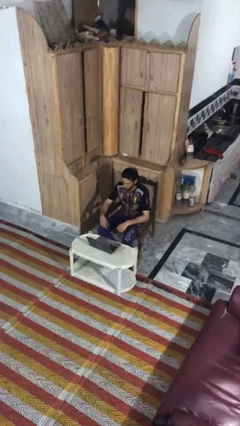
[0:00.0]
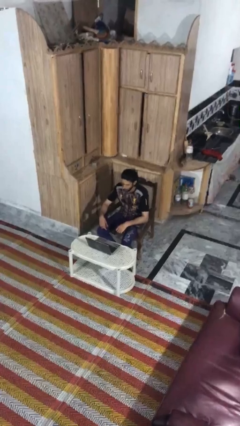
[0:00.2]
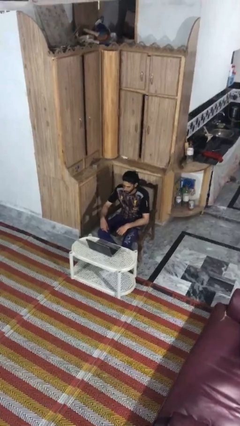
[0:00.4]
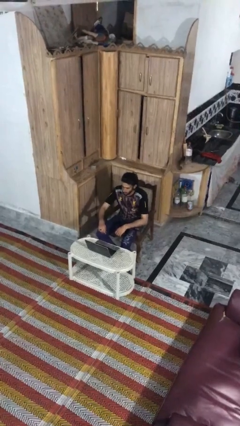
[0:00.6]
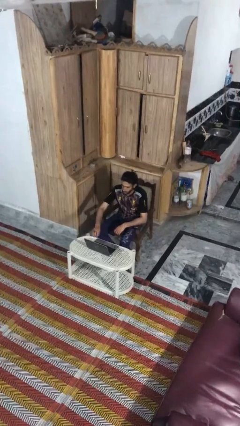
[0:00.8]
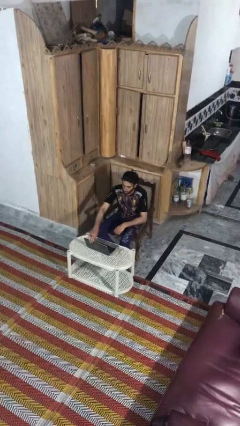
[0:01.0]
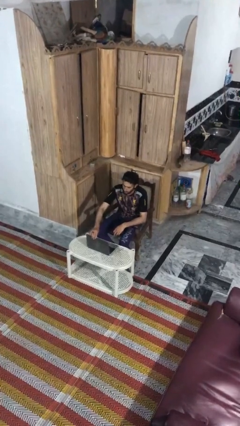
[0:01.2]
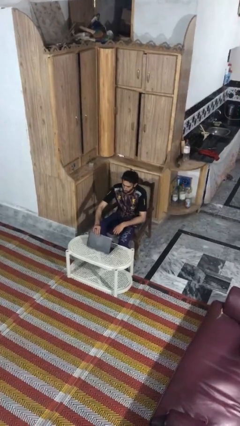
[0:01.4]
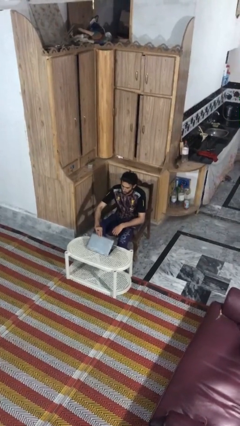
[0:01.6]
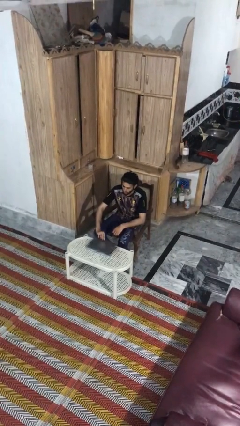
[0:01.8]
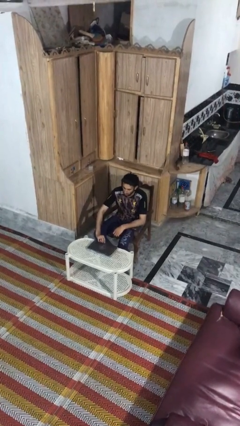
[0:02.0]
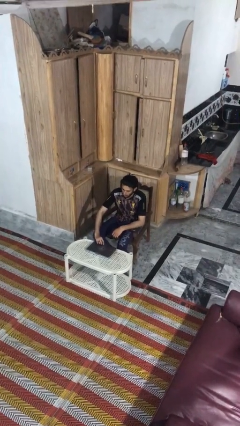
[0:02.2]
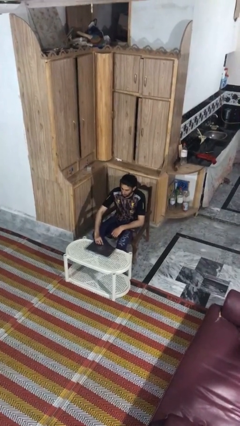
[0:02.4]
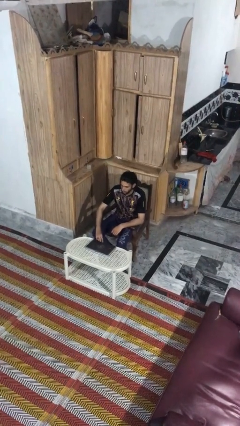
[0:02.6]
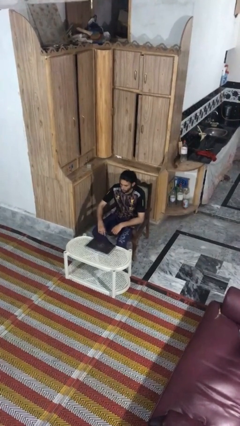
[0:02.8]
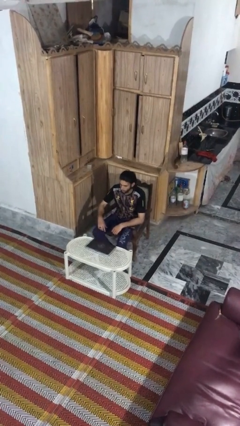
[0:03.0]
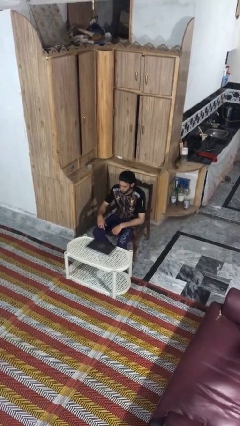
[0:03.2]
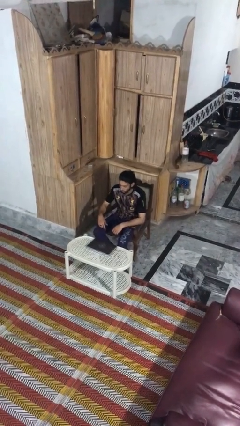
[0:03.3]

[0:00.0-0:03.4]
person closes laptop

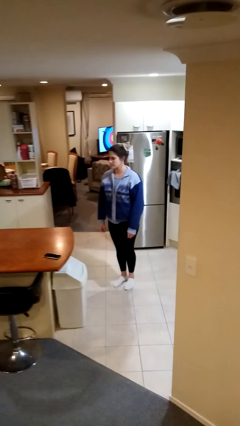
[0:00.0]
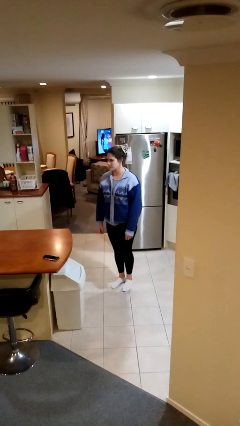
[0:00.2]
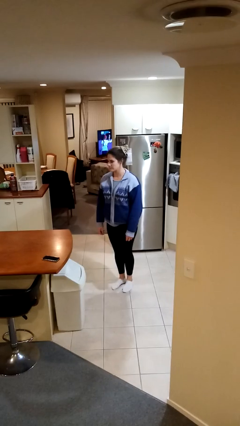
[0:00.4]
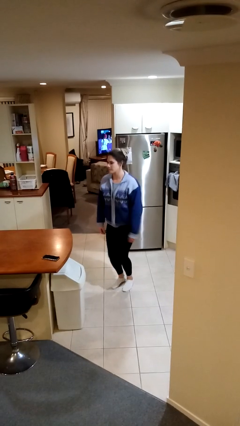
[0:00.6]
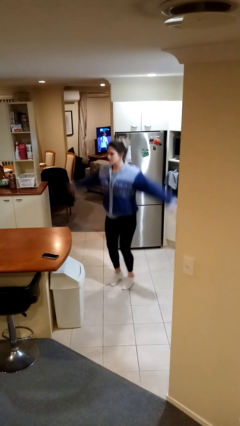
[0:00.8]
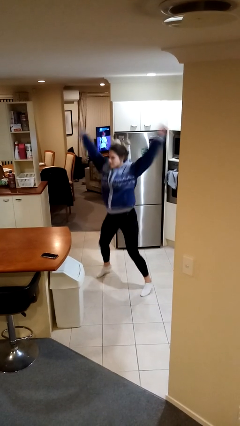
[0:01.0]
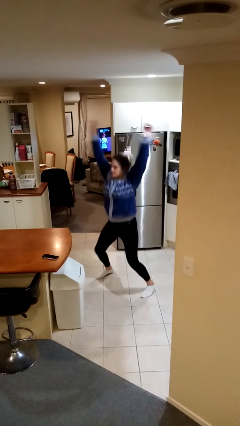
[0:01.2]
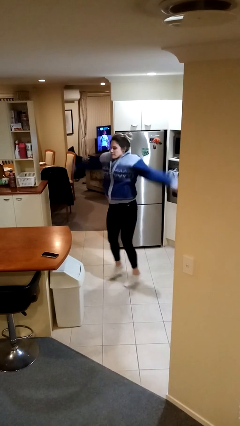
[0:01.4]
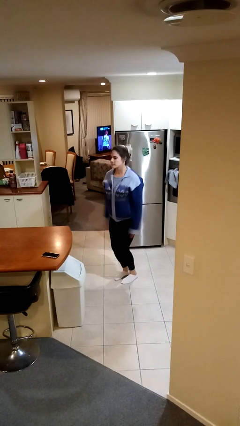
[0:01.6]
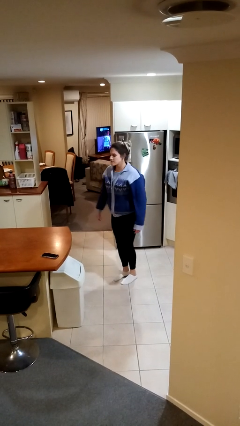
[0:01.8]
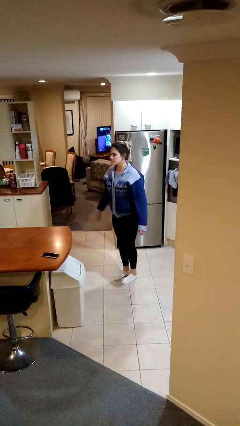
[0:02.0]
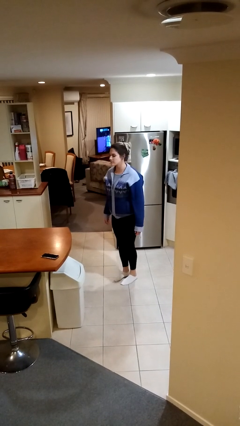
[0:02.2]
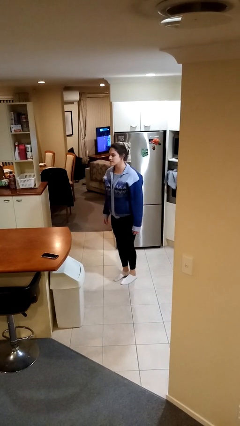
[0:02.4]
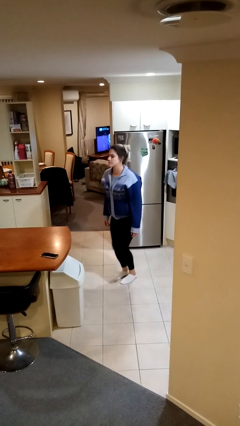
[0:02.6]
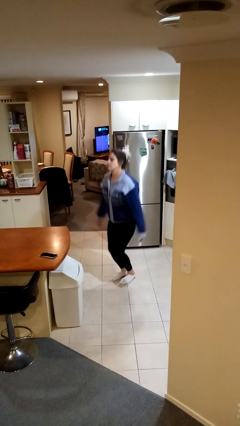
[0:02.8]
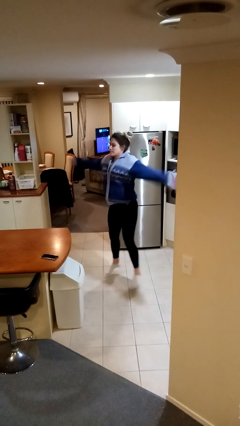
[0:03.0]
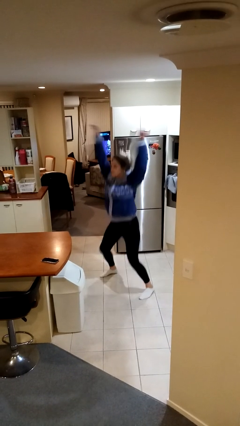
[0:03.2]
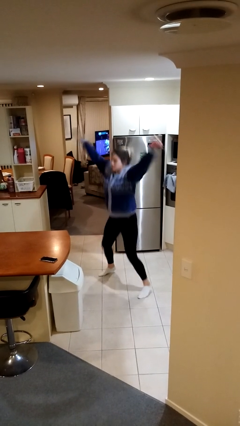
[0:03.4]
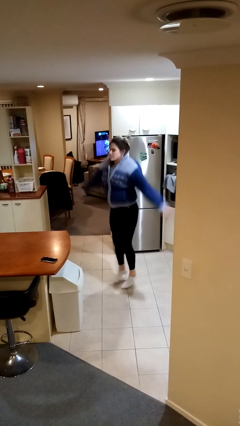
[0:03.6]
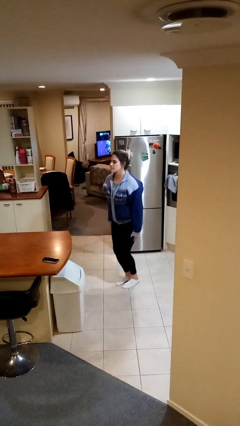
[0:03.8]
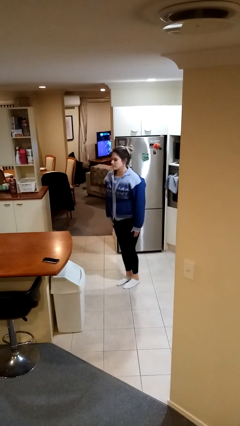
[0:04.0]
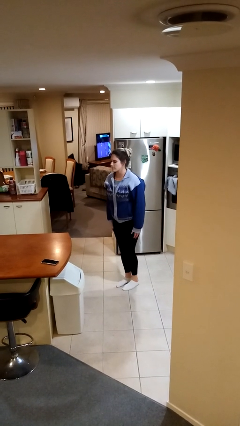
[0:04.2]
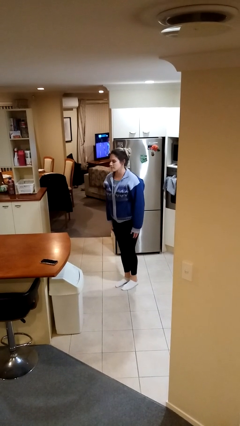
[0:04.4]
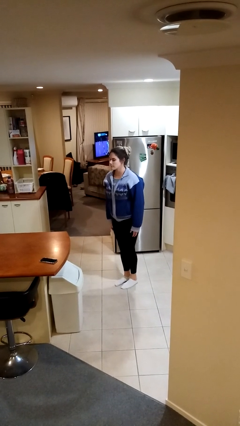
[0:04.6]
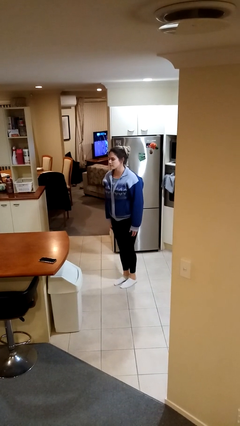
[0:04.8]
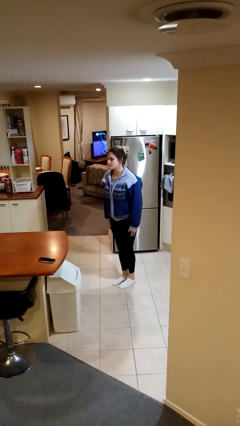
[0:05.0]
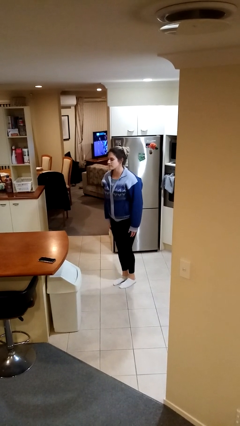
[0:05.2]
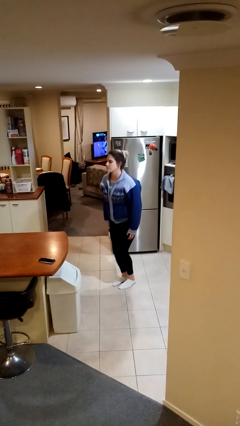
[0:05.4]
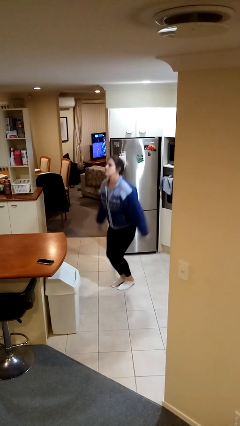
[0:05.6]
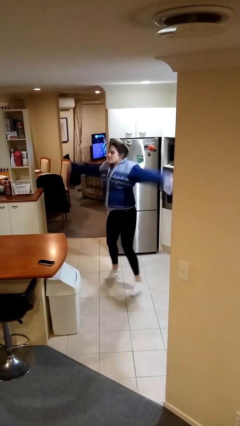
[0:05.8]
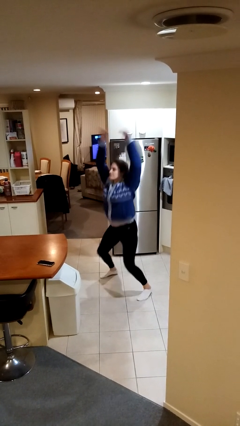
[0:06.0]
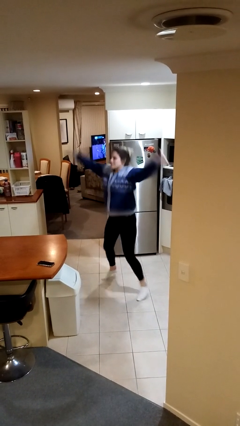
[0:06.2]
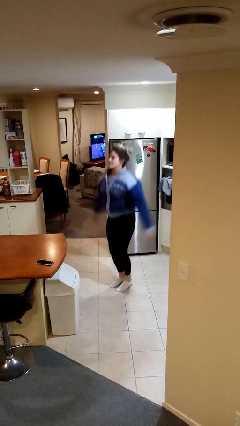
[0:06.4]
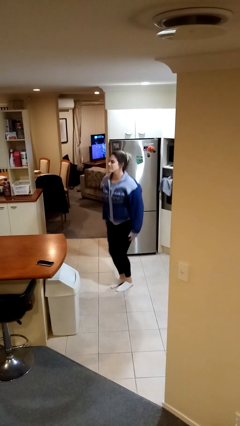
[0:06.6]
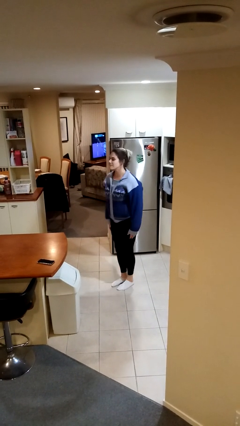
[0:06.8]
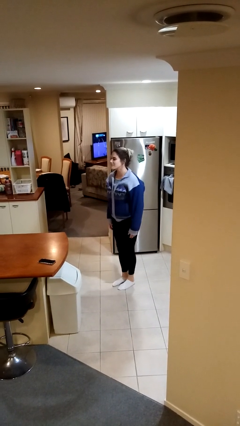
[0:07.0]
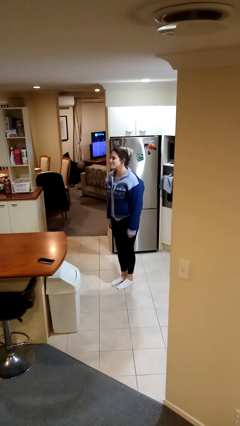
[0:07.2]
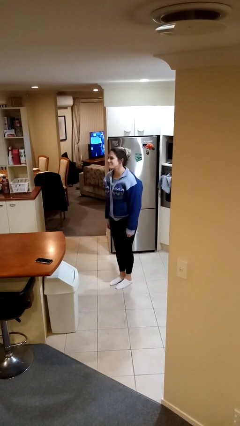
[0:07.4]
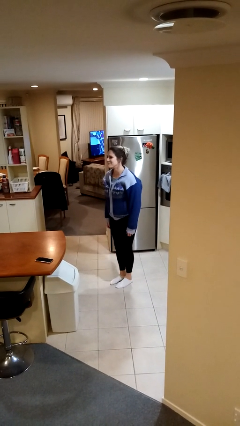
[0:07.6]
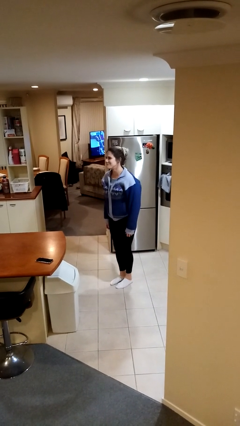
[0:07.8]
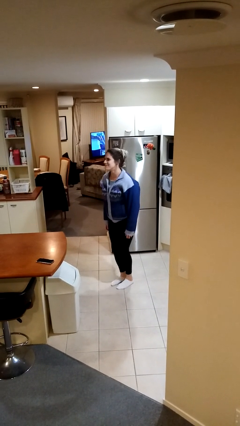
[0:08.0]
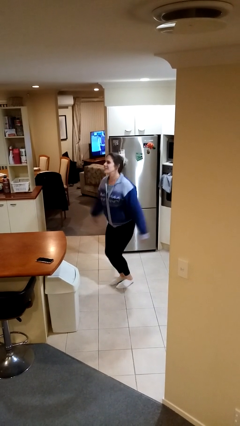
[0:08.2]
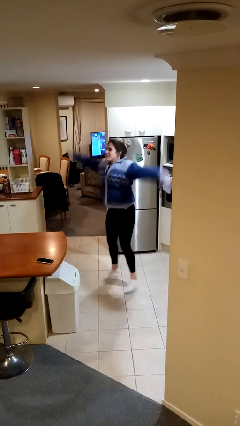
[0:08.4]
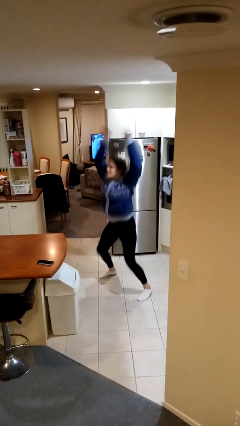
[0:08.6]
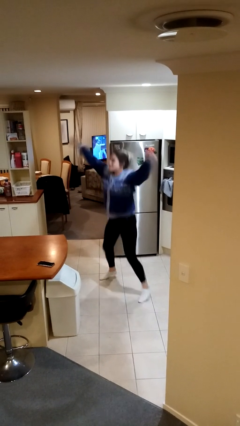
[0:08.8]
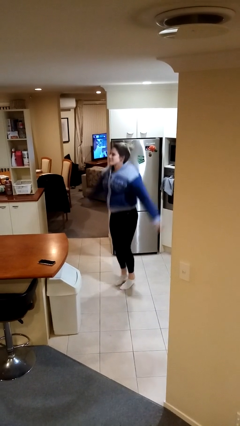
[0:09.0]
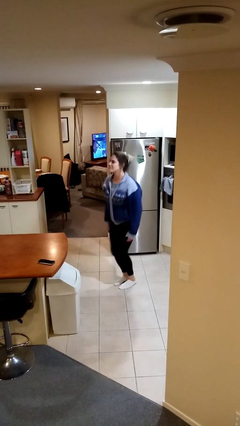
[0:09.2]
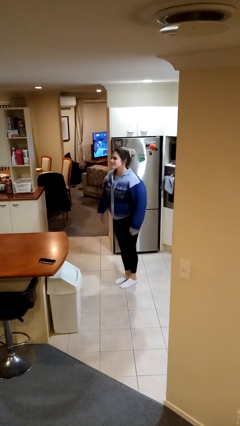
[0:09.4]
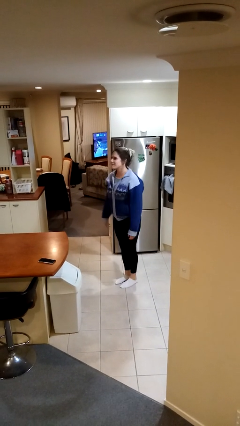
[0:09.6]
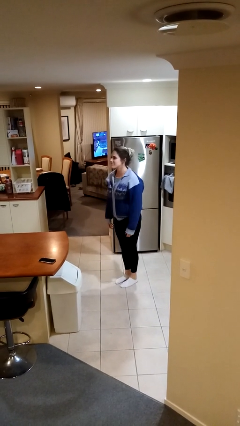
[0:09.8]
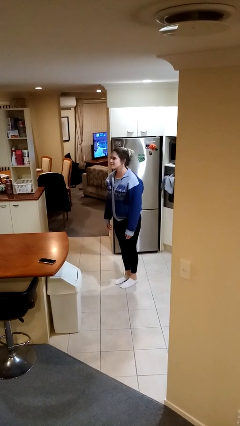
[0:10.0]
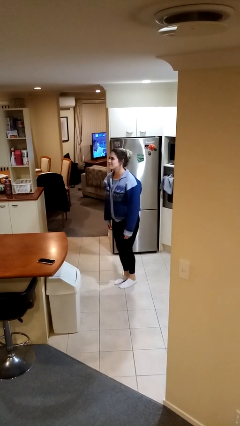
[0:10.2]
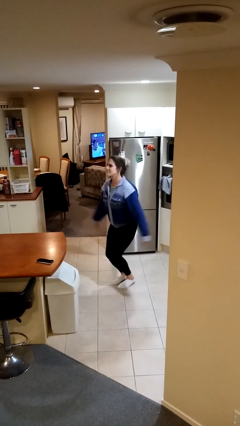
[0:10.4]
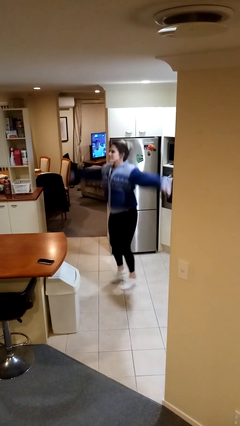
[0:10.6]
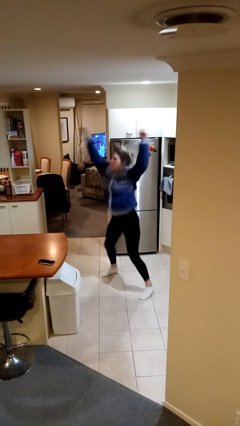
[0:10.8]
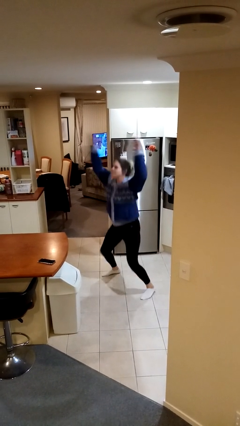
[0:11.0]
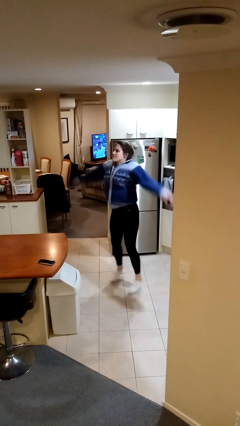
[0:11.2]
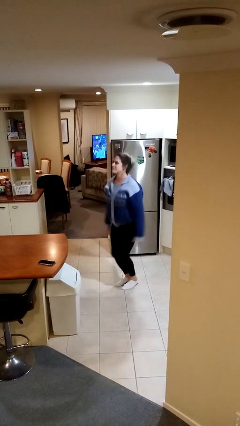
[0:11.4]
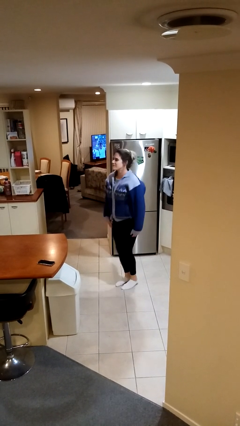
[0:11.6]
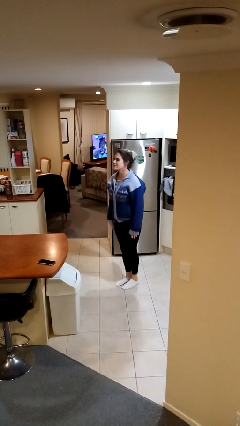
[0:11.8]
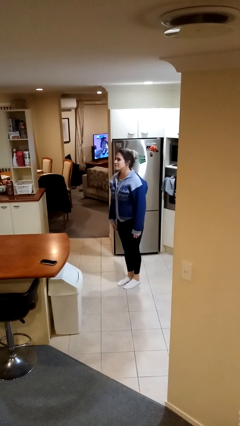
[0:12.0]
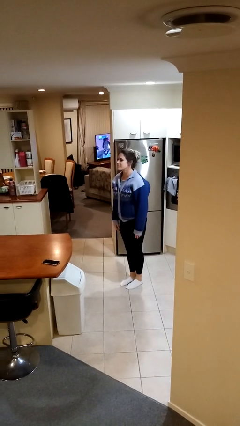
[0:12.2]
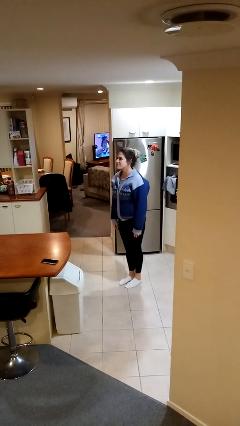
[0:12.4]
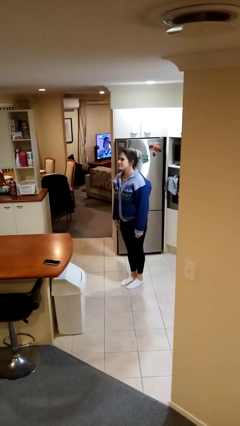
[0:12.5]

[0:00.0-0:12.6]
person exercises with jumping jacks

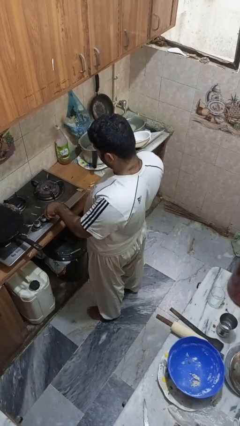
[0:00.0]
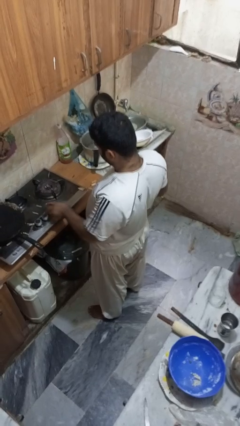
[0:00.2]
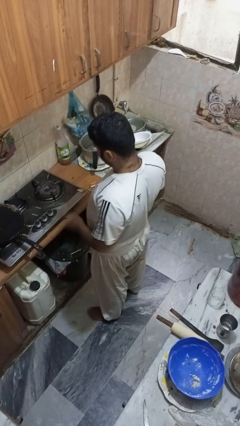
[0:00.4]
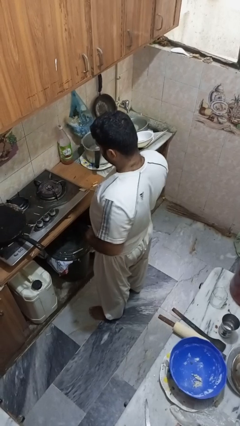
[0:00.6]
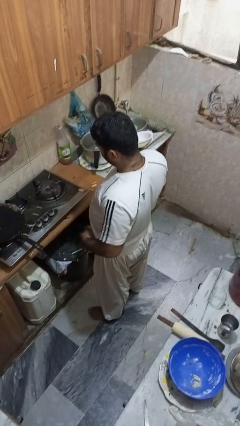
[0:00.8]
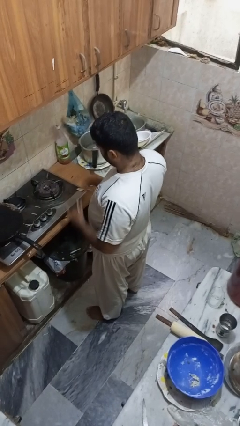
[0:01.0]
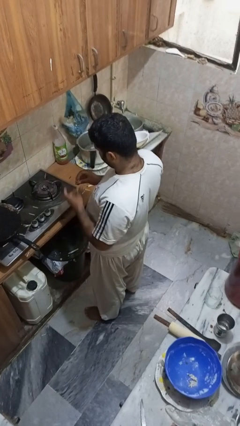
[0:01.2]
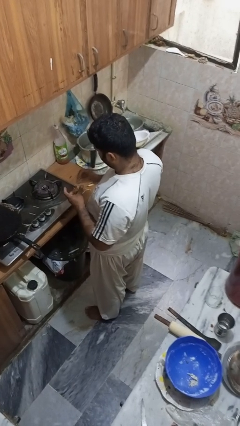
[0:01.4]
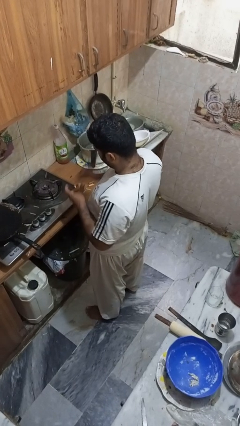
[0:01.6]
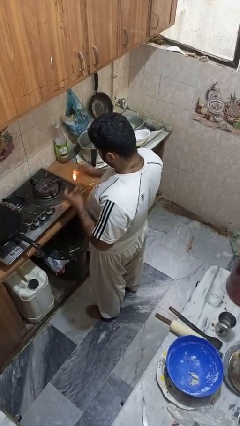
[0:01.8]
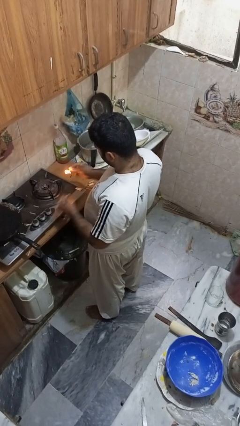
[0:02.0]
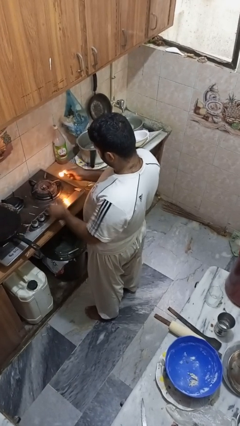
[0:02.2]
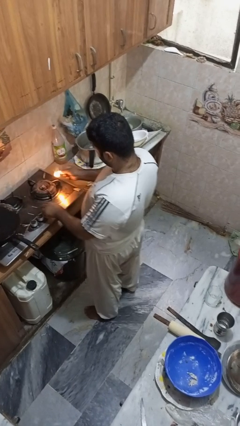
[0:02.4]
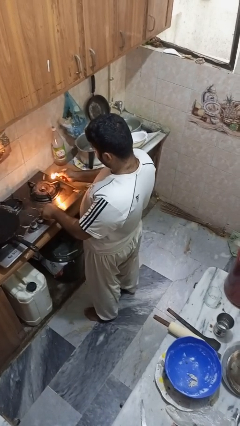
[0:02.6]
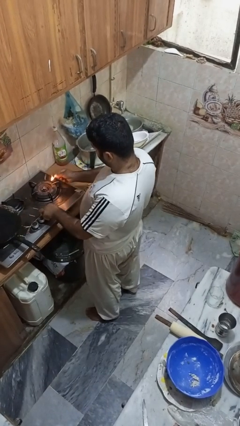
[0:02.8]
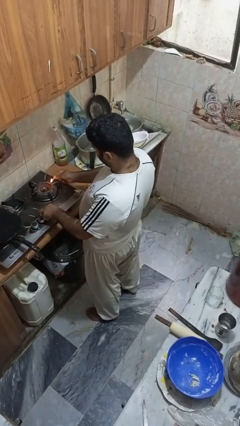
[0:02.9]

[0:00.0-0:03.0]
person turns on stovetop
